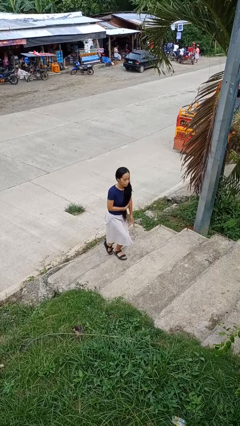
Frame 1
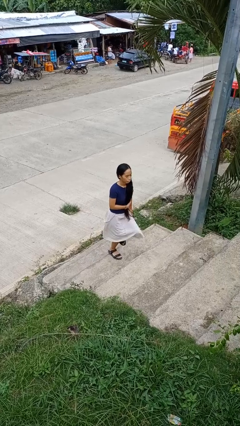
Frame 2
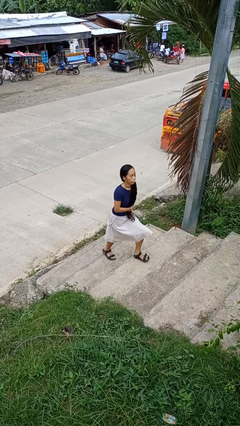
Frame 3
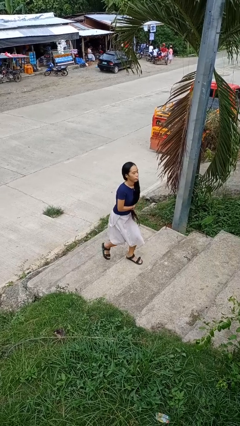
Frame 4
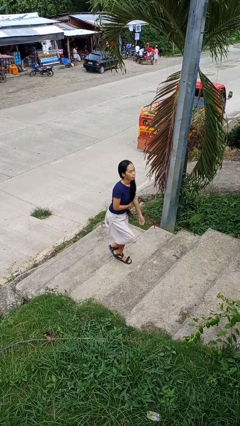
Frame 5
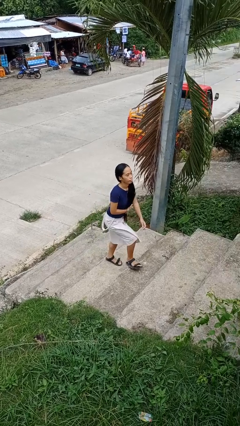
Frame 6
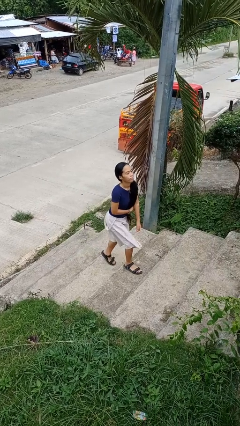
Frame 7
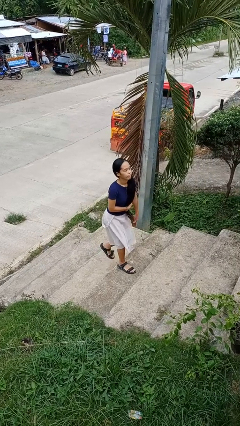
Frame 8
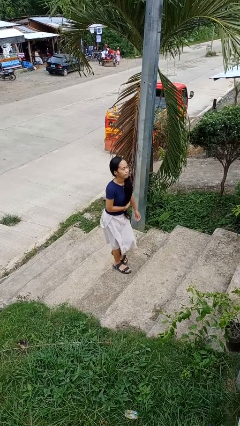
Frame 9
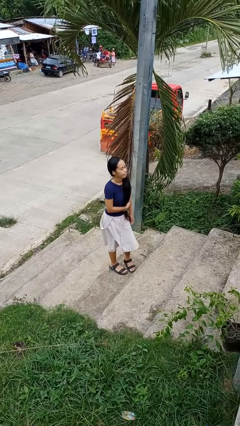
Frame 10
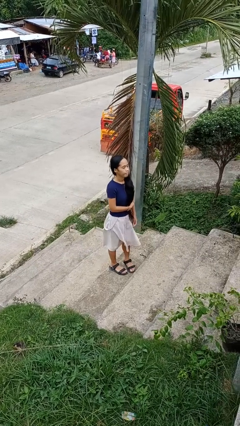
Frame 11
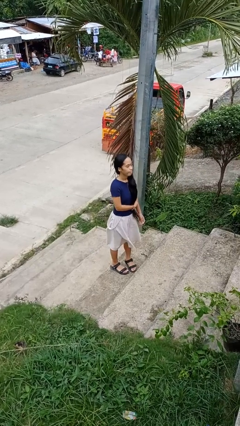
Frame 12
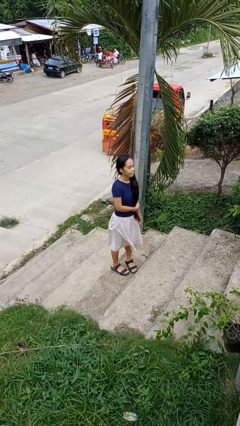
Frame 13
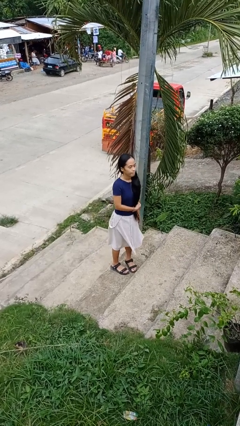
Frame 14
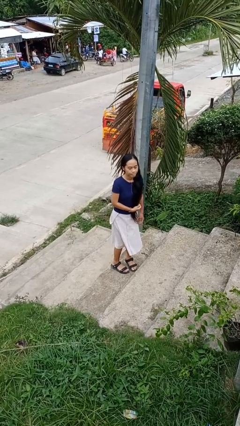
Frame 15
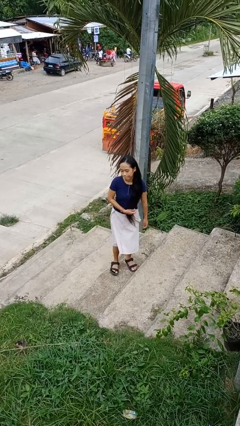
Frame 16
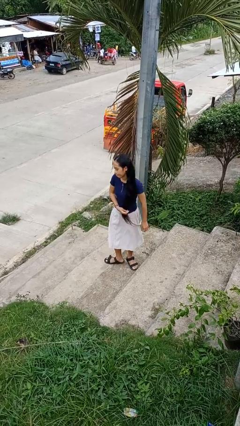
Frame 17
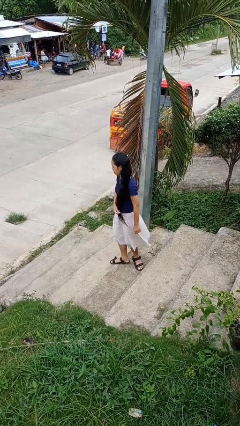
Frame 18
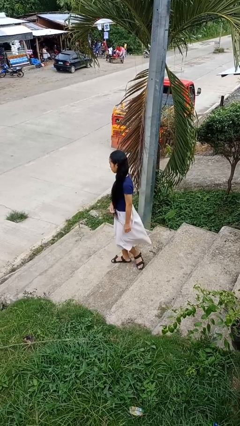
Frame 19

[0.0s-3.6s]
person climbs up stairs

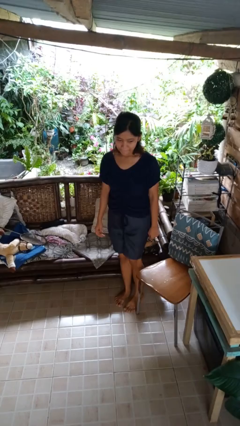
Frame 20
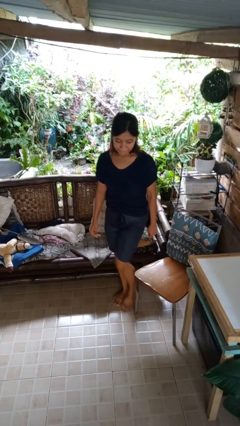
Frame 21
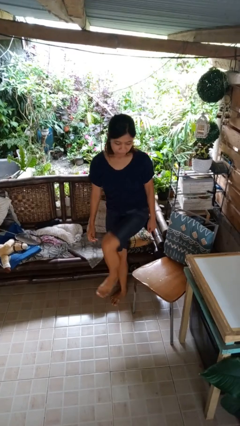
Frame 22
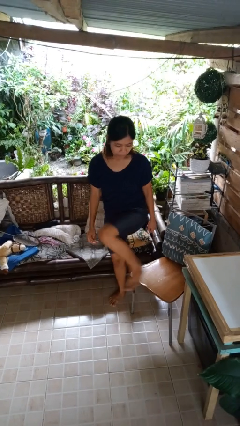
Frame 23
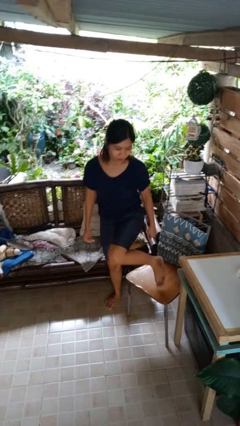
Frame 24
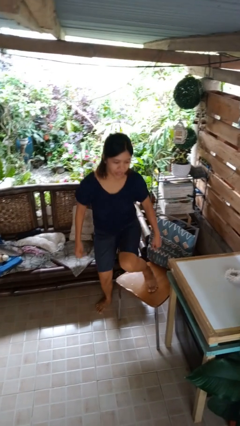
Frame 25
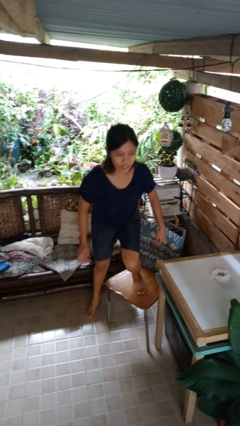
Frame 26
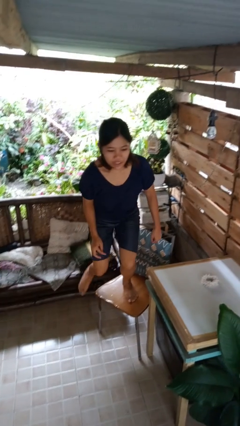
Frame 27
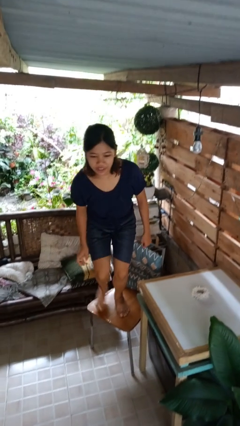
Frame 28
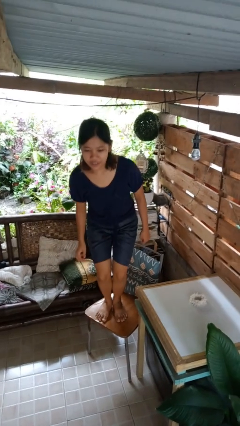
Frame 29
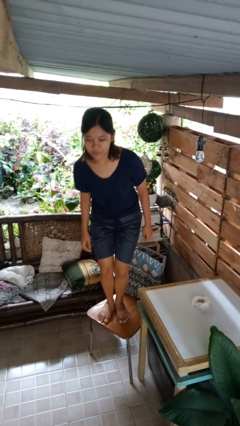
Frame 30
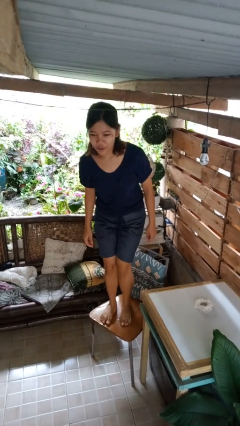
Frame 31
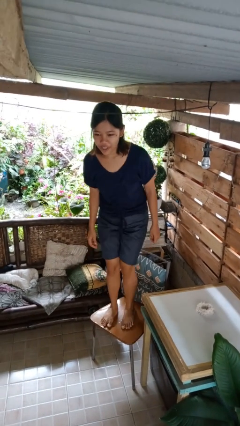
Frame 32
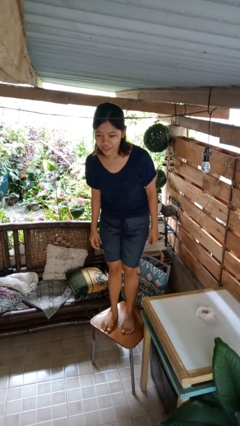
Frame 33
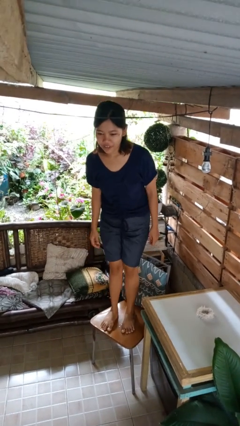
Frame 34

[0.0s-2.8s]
person climbs on chair

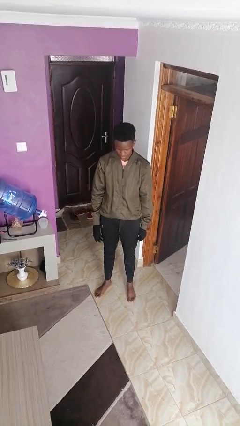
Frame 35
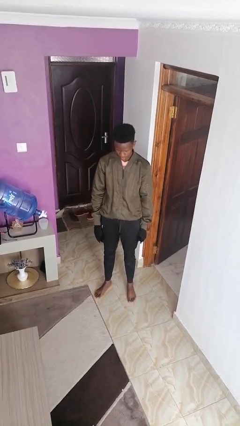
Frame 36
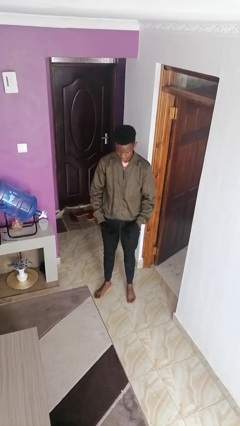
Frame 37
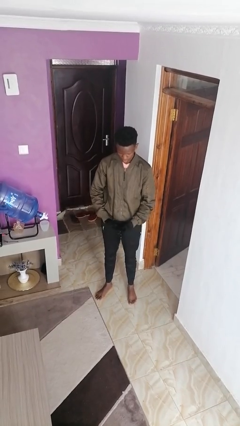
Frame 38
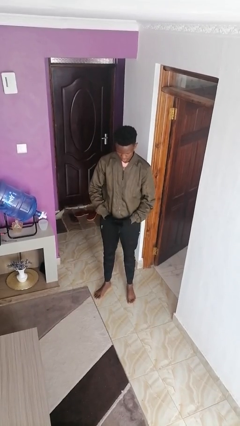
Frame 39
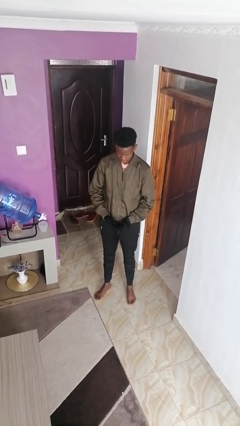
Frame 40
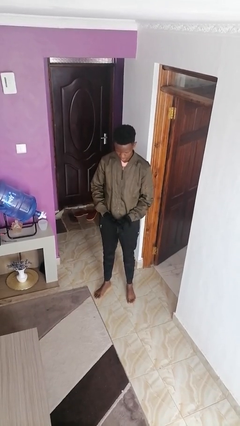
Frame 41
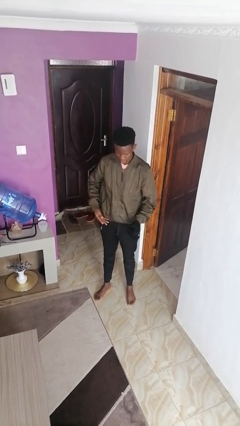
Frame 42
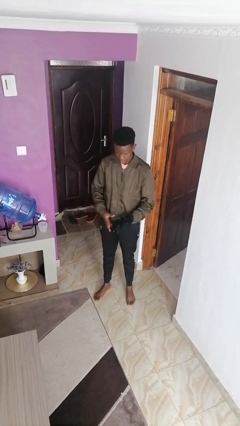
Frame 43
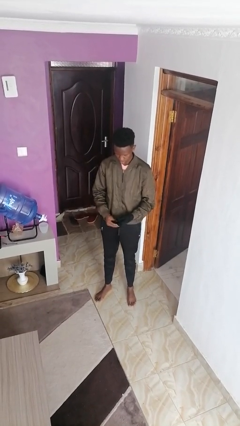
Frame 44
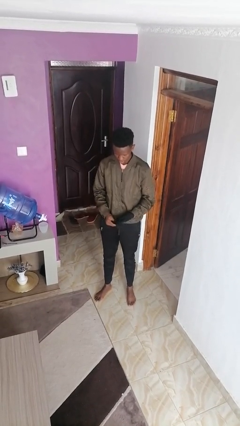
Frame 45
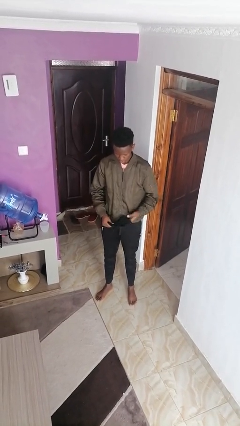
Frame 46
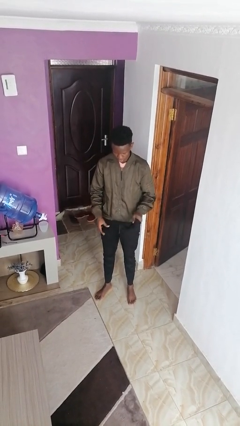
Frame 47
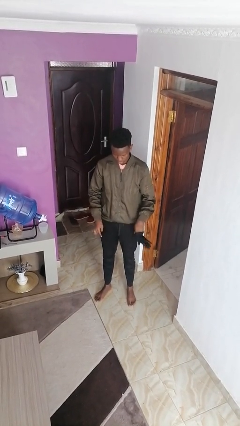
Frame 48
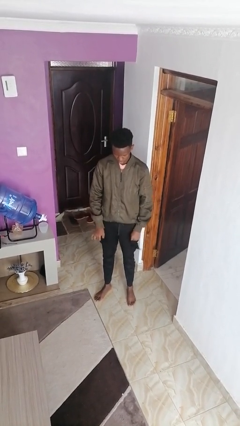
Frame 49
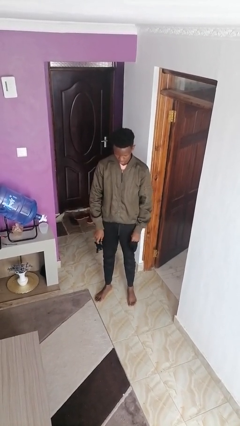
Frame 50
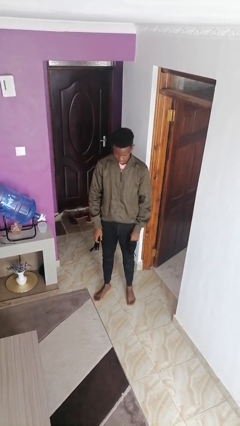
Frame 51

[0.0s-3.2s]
person takes off gloves

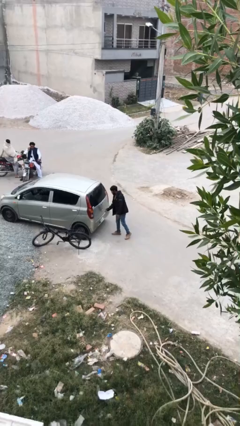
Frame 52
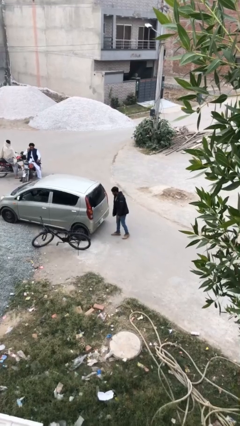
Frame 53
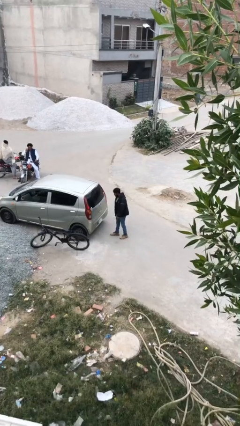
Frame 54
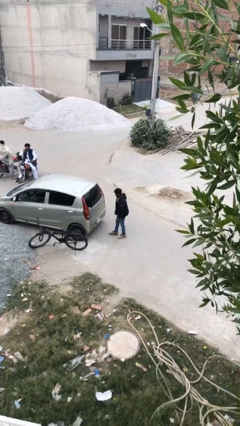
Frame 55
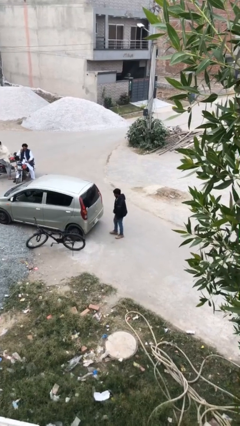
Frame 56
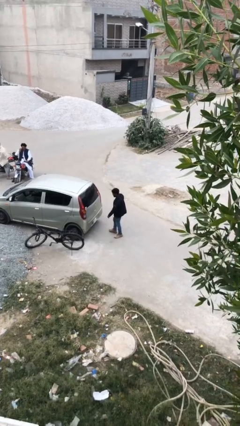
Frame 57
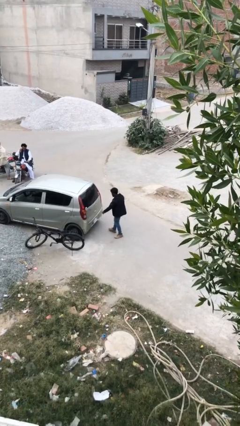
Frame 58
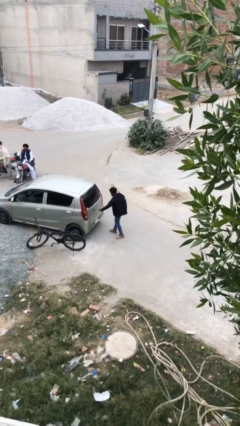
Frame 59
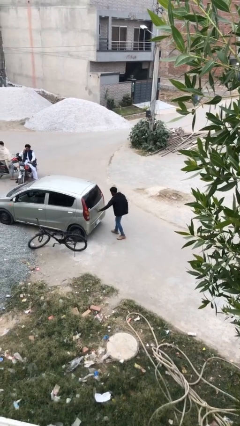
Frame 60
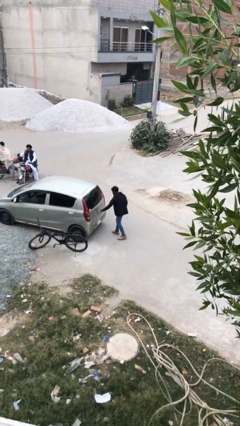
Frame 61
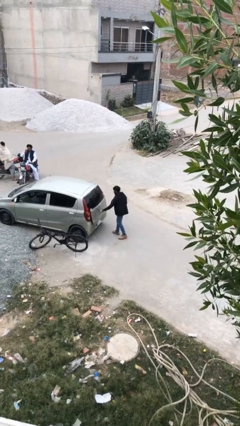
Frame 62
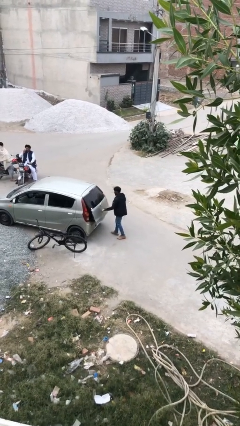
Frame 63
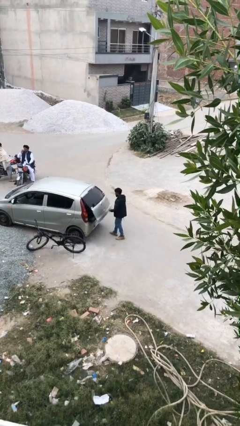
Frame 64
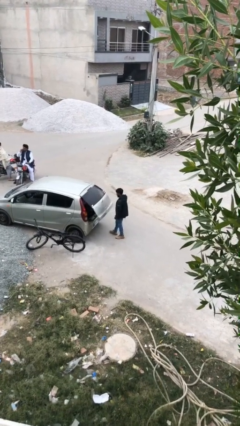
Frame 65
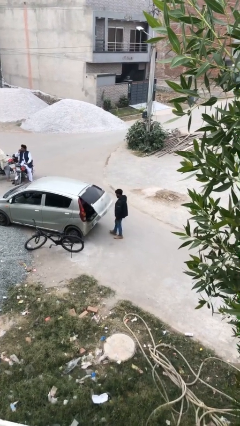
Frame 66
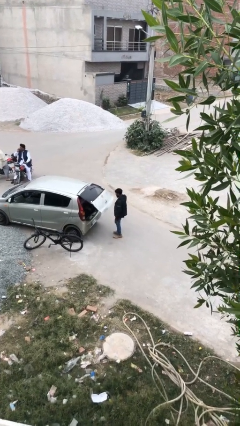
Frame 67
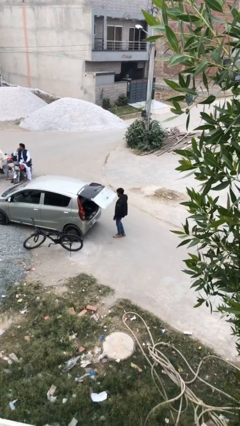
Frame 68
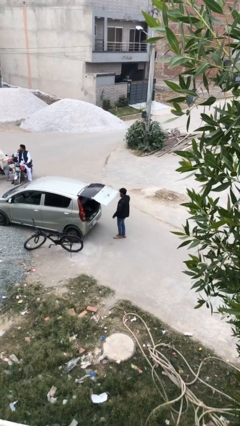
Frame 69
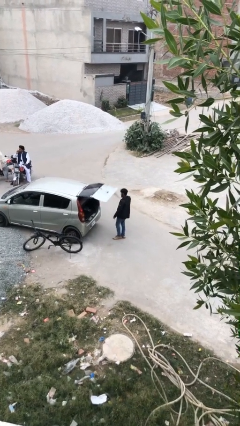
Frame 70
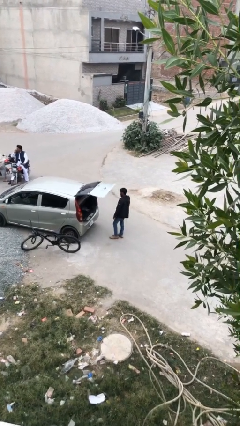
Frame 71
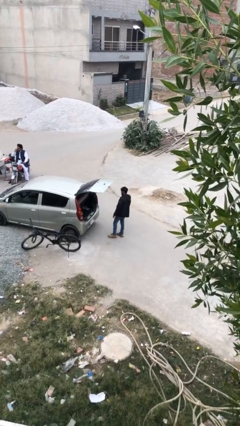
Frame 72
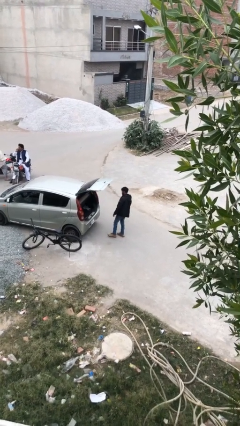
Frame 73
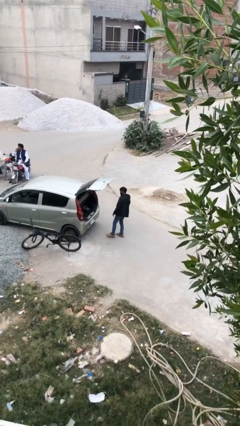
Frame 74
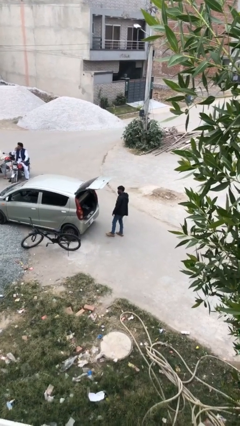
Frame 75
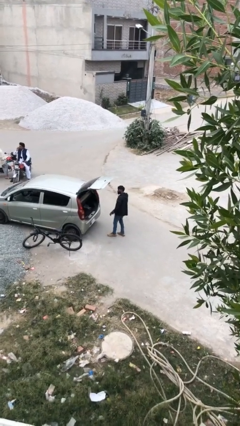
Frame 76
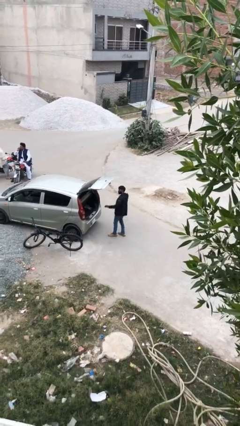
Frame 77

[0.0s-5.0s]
person opens car trunk

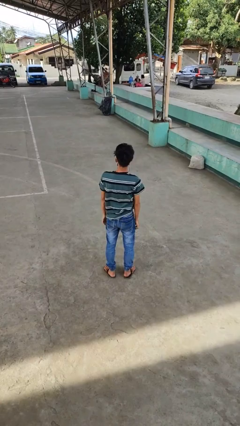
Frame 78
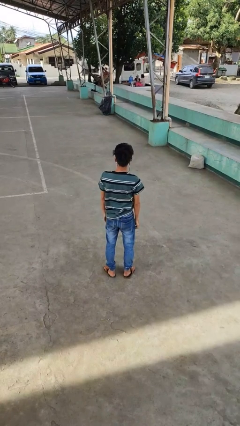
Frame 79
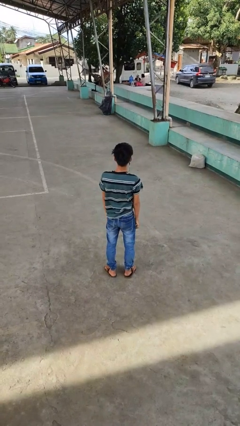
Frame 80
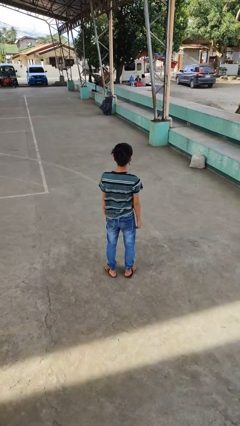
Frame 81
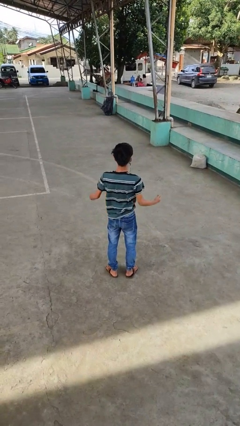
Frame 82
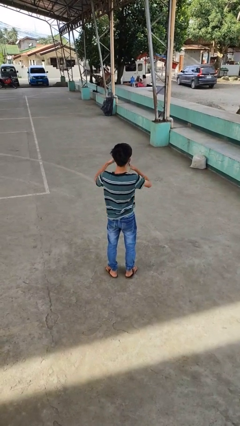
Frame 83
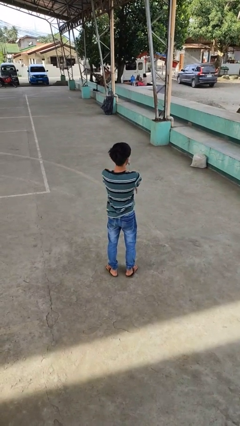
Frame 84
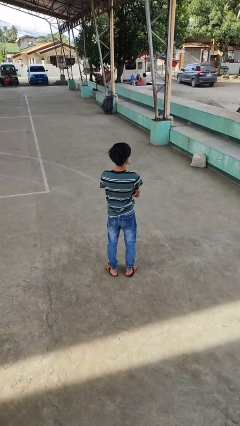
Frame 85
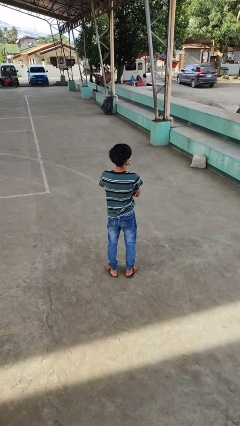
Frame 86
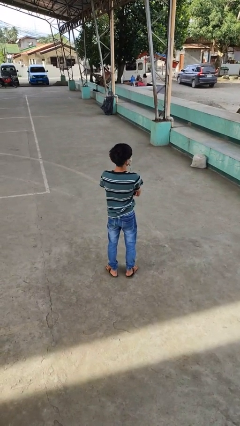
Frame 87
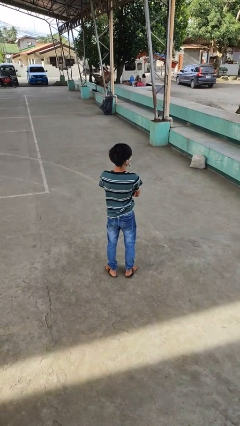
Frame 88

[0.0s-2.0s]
person crosses arms

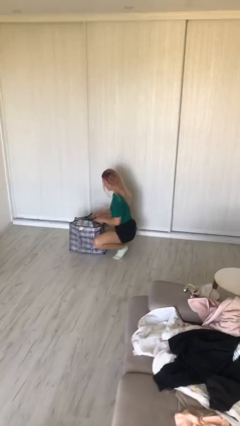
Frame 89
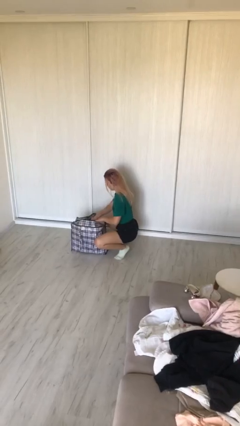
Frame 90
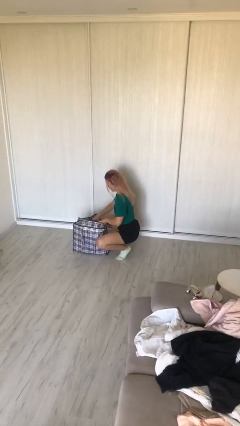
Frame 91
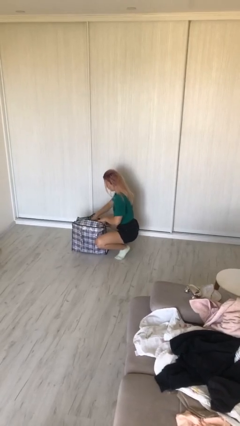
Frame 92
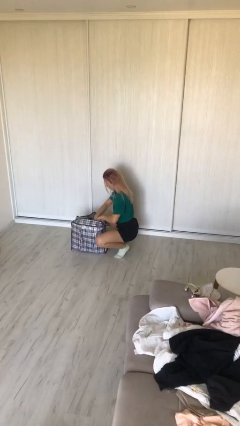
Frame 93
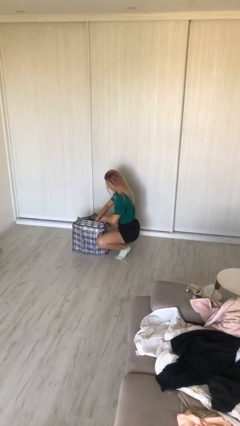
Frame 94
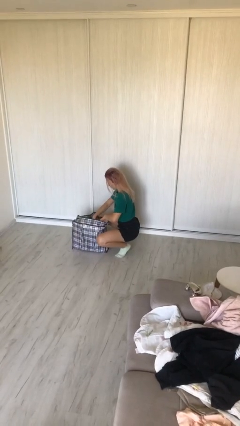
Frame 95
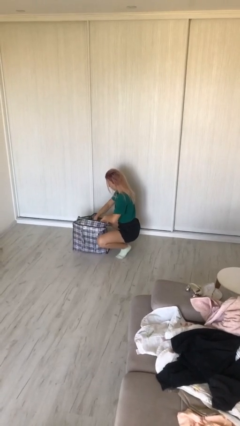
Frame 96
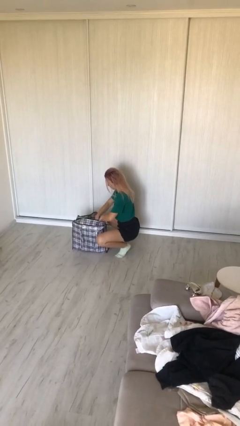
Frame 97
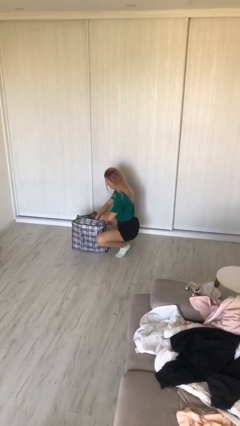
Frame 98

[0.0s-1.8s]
person searches in bag
